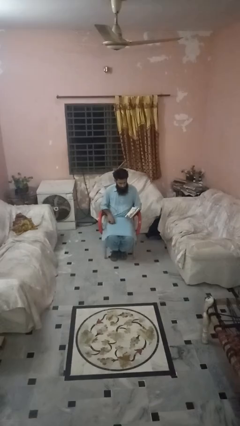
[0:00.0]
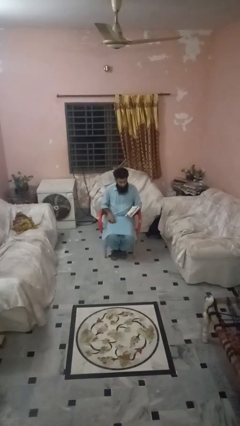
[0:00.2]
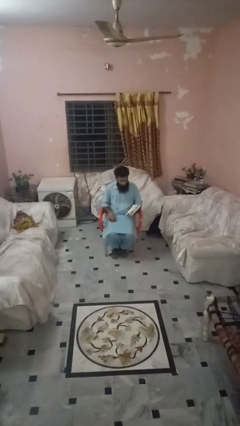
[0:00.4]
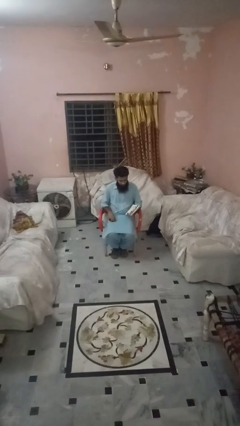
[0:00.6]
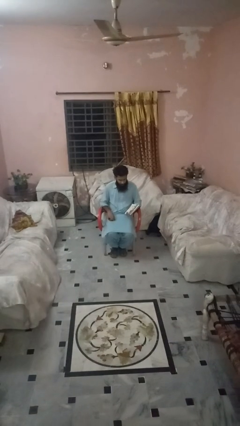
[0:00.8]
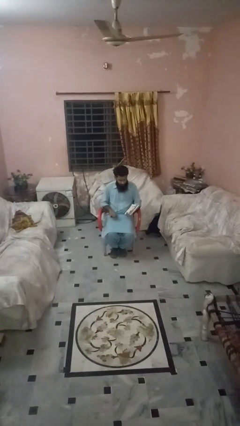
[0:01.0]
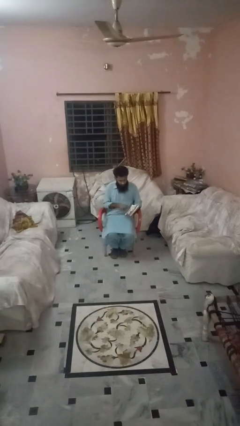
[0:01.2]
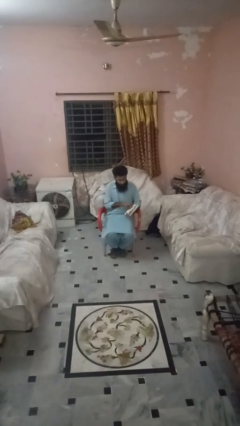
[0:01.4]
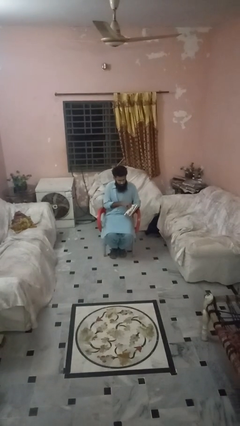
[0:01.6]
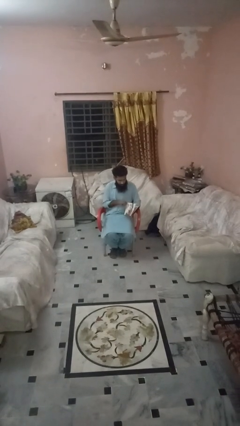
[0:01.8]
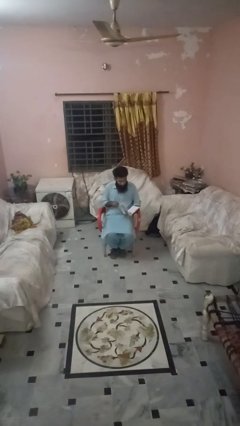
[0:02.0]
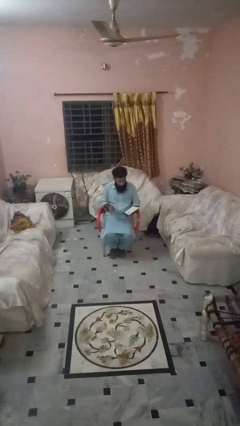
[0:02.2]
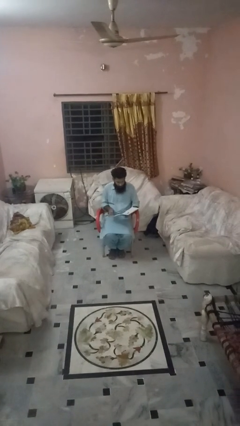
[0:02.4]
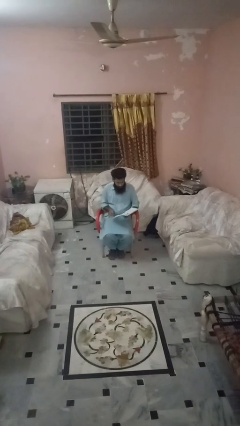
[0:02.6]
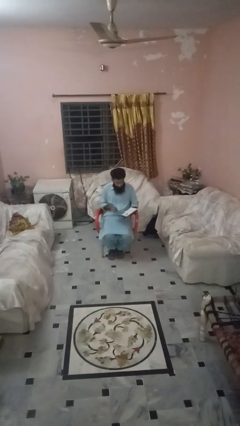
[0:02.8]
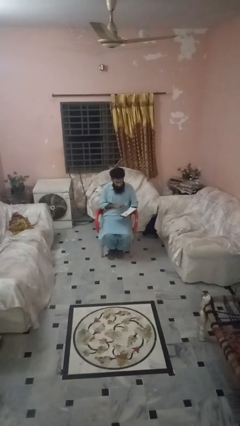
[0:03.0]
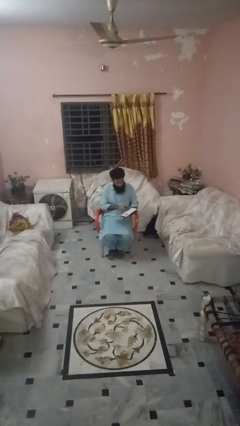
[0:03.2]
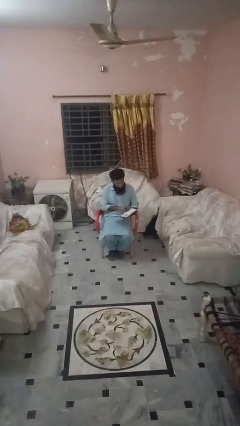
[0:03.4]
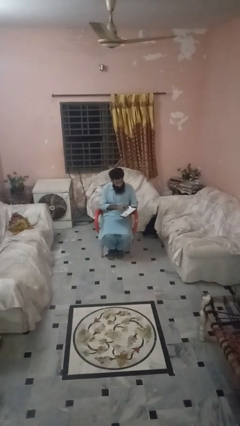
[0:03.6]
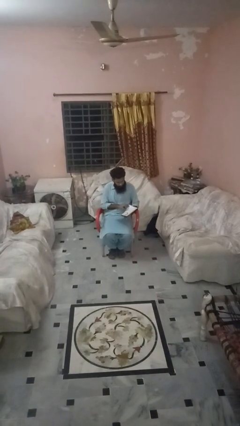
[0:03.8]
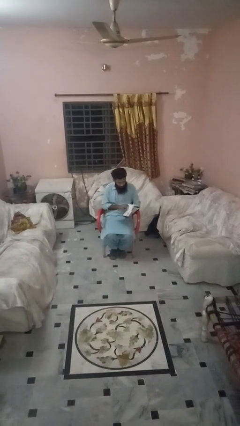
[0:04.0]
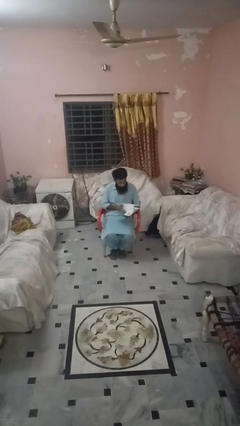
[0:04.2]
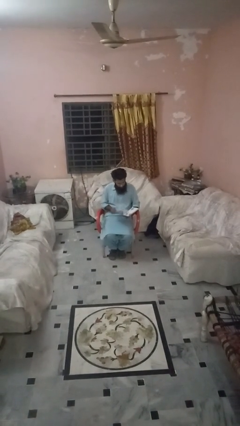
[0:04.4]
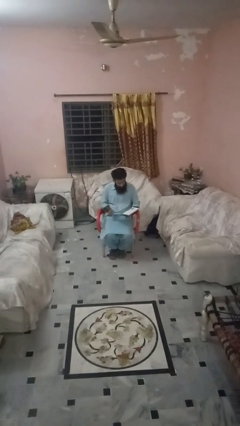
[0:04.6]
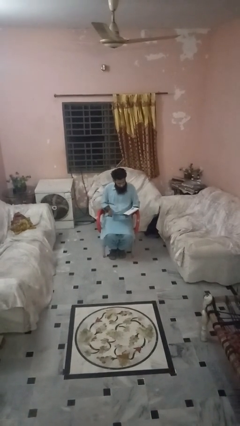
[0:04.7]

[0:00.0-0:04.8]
person reads magazine

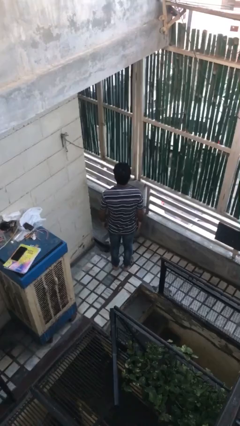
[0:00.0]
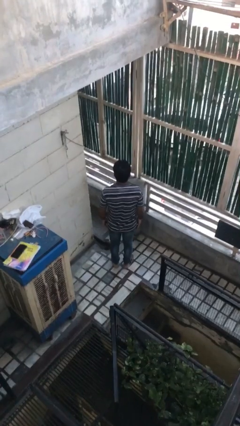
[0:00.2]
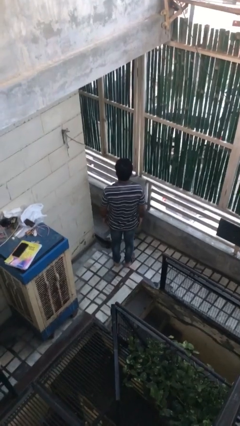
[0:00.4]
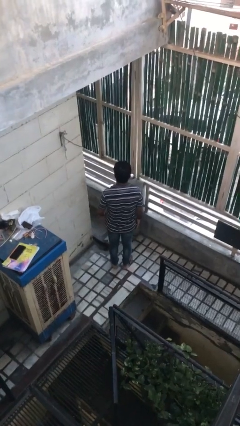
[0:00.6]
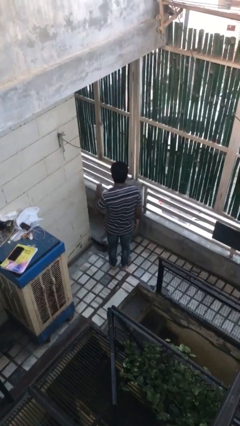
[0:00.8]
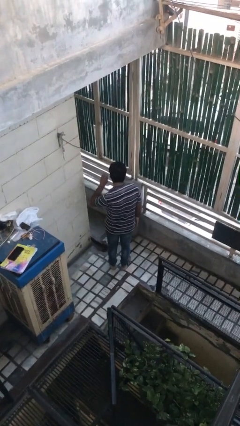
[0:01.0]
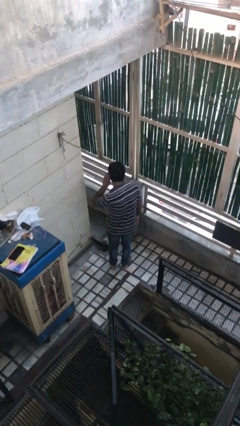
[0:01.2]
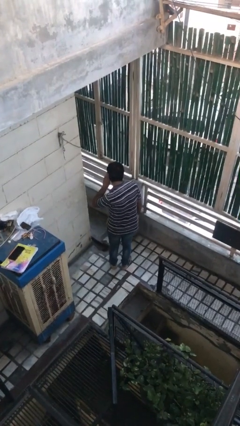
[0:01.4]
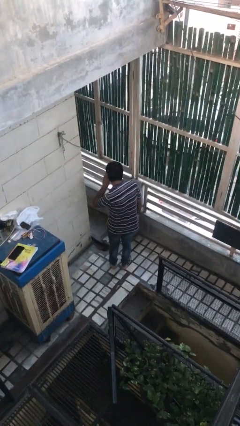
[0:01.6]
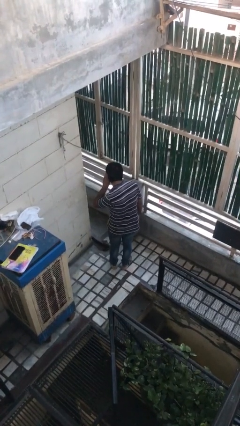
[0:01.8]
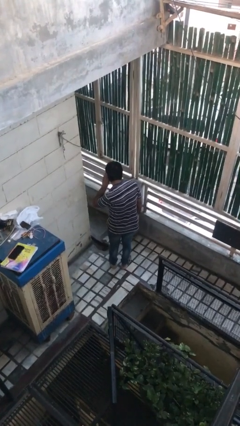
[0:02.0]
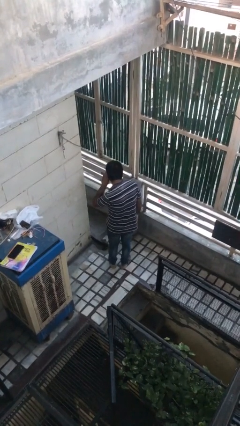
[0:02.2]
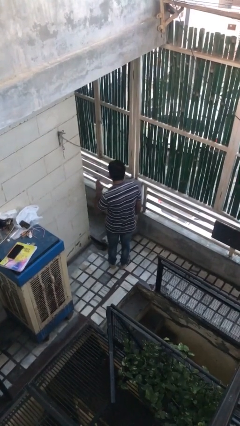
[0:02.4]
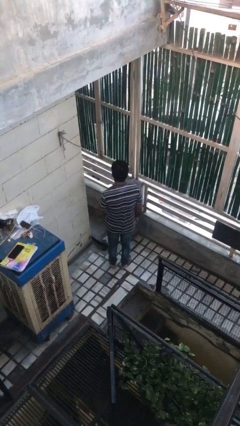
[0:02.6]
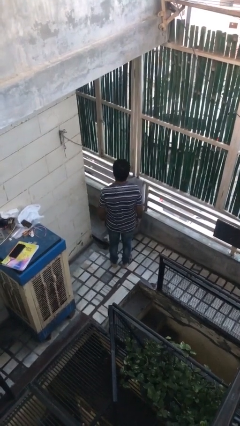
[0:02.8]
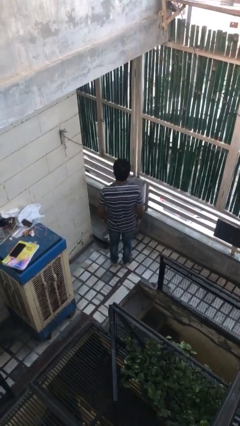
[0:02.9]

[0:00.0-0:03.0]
person gestures listen closely

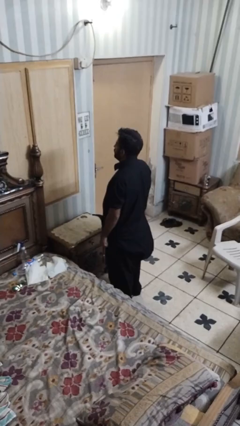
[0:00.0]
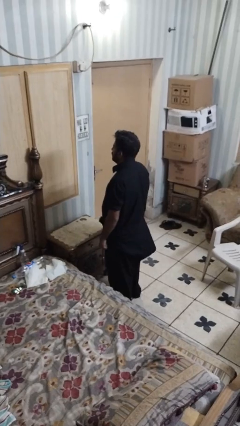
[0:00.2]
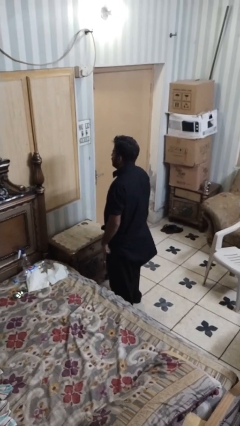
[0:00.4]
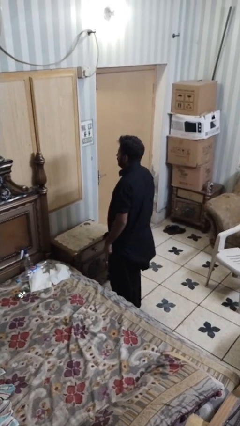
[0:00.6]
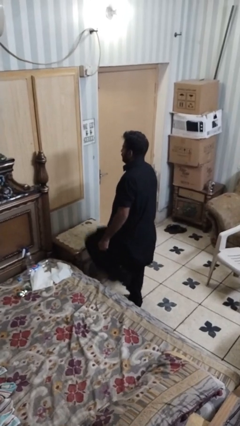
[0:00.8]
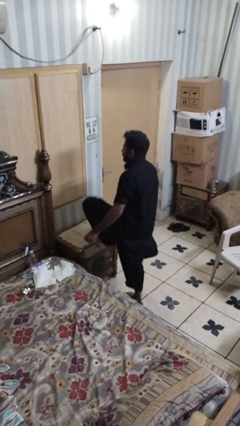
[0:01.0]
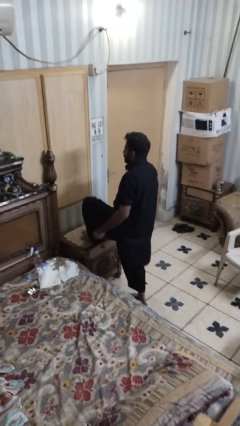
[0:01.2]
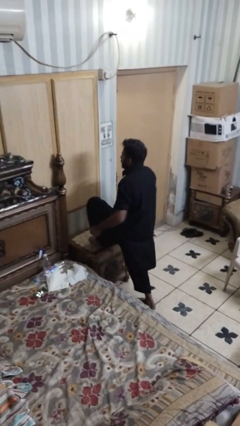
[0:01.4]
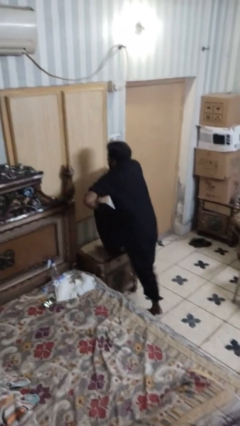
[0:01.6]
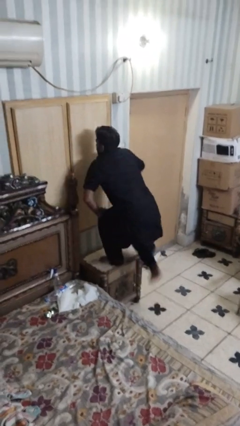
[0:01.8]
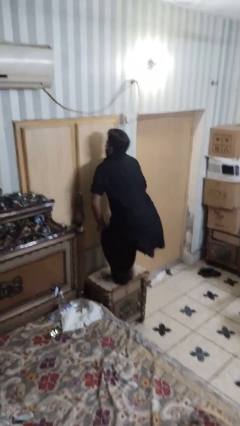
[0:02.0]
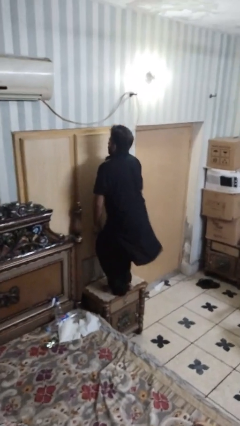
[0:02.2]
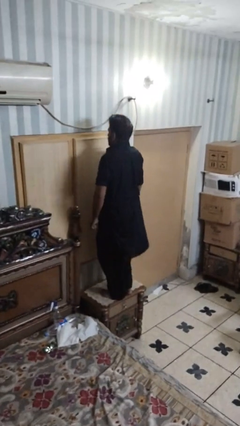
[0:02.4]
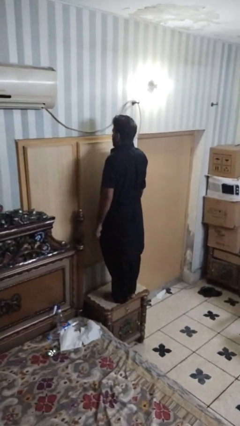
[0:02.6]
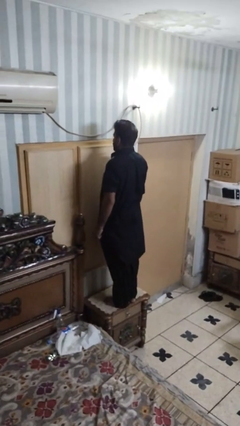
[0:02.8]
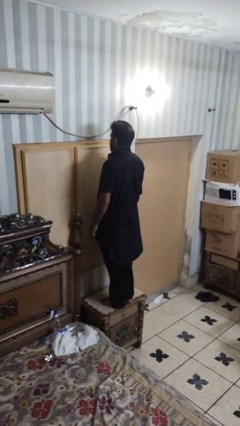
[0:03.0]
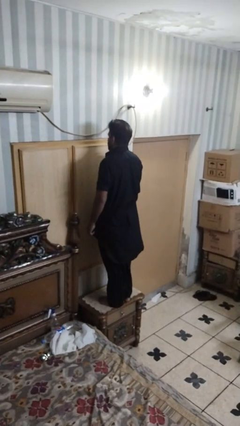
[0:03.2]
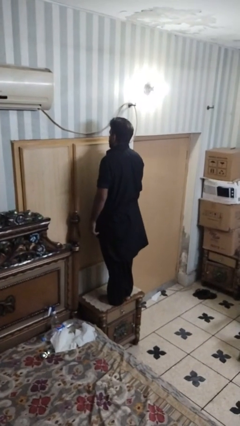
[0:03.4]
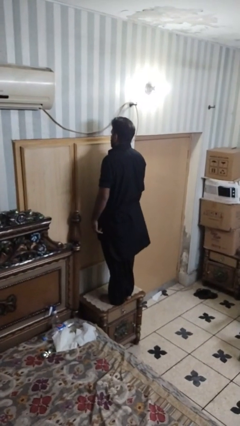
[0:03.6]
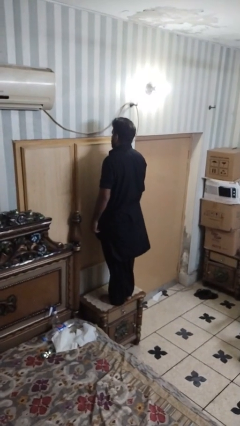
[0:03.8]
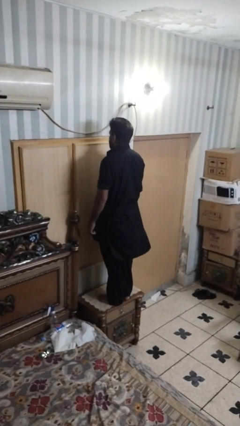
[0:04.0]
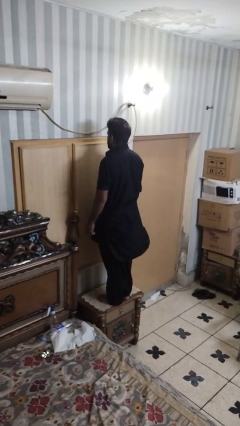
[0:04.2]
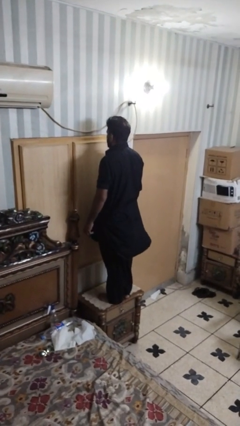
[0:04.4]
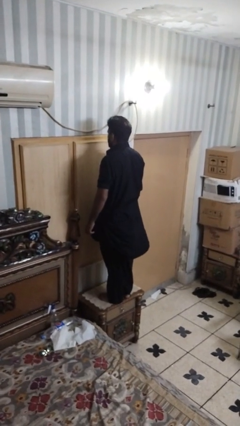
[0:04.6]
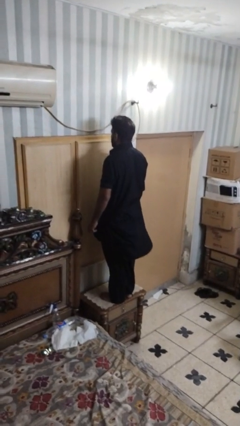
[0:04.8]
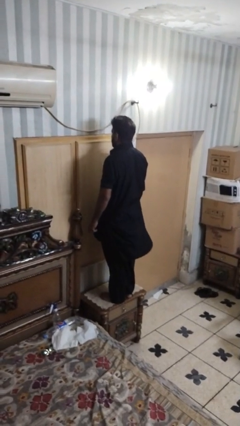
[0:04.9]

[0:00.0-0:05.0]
person climbs on table

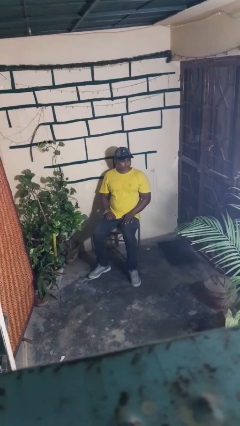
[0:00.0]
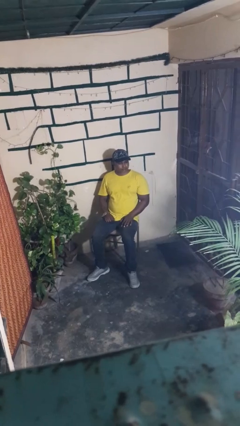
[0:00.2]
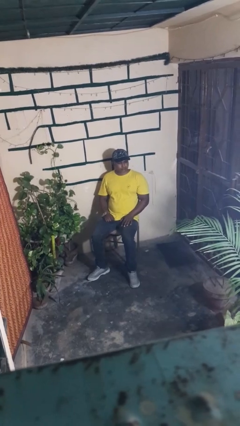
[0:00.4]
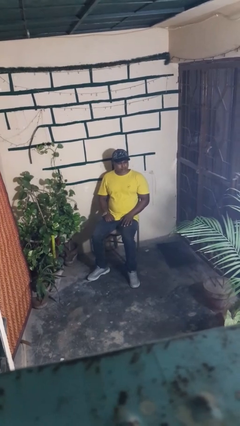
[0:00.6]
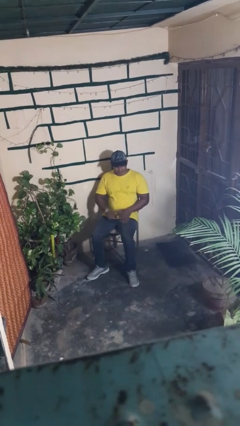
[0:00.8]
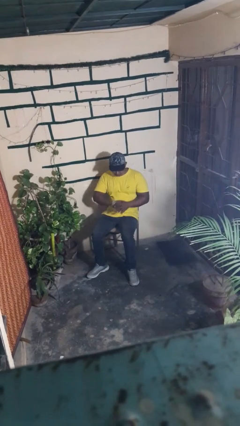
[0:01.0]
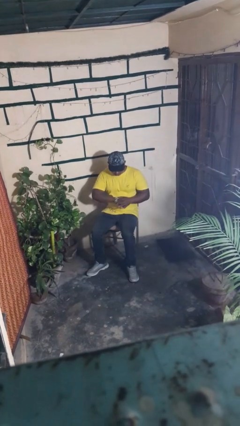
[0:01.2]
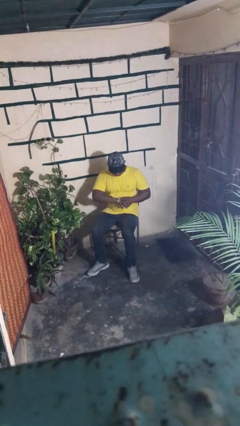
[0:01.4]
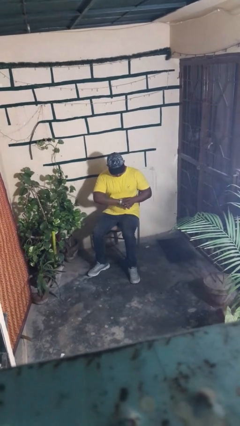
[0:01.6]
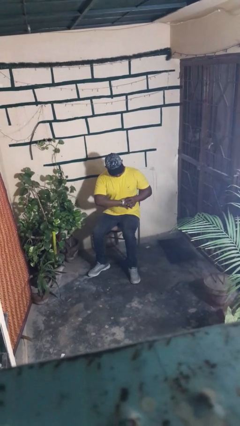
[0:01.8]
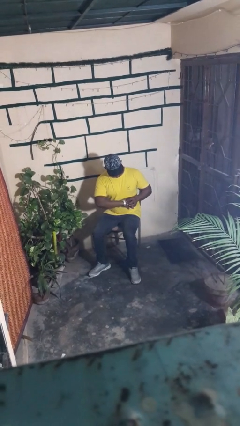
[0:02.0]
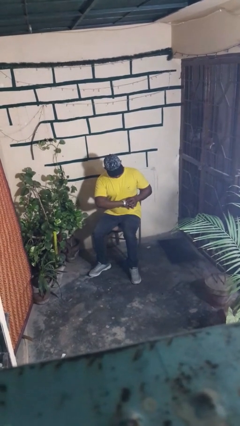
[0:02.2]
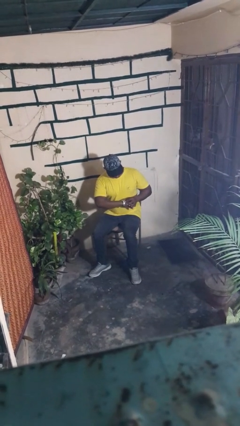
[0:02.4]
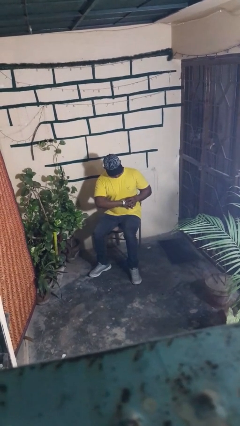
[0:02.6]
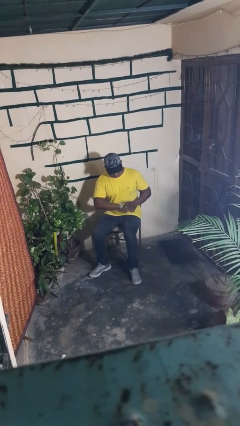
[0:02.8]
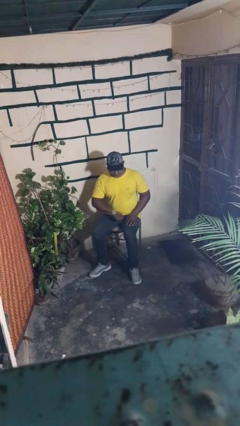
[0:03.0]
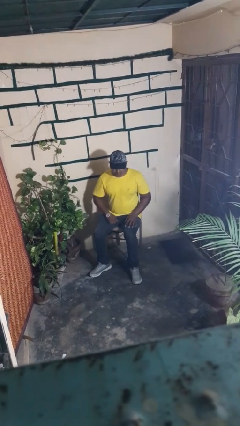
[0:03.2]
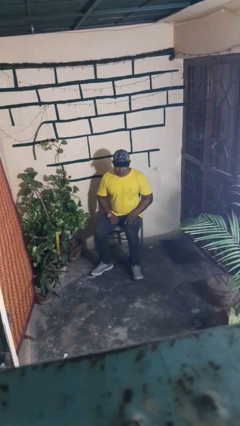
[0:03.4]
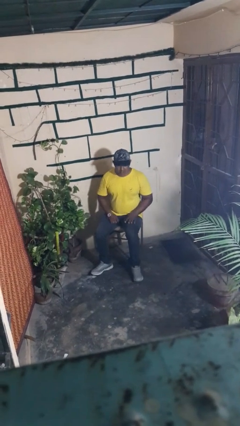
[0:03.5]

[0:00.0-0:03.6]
person looks at wristwatch

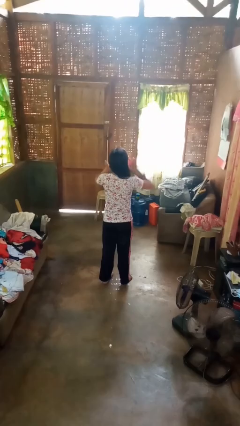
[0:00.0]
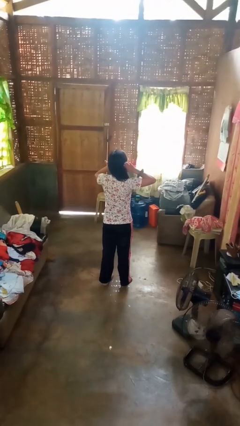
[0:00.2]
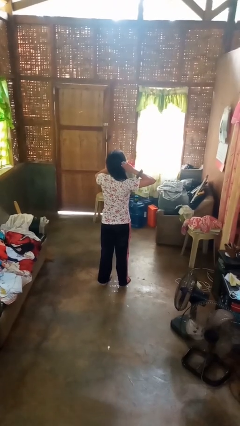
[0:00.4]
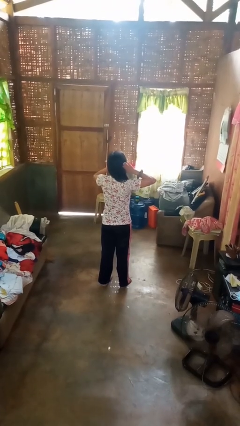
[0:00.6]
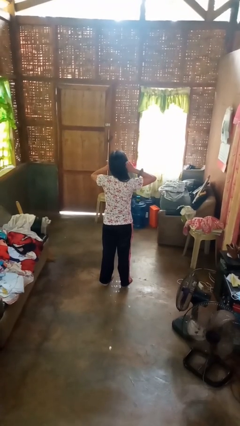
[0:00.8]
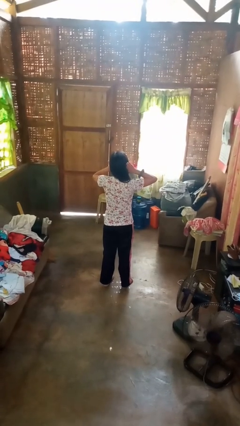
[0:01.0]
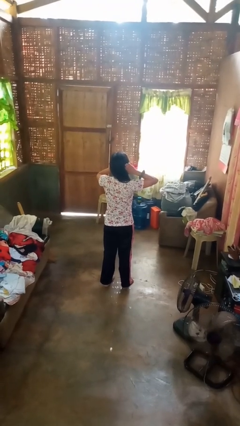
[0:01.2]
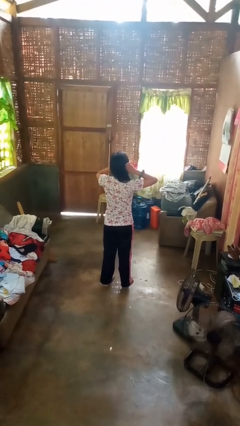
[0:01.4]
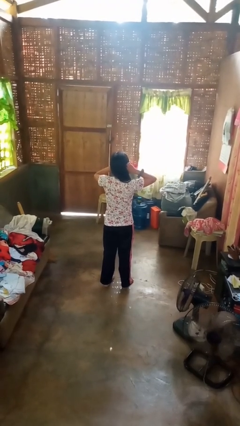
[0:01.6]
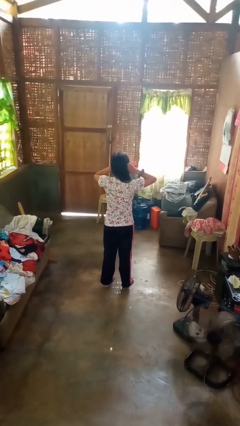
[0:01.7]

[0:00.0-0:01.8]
person puts fingers in ear
